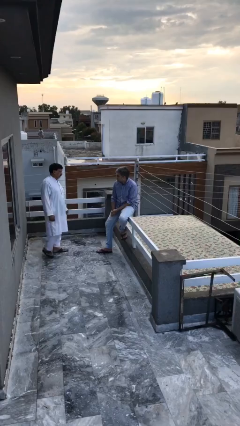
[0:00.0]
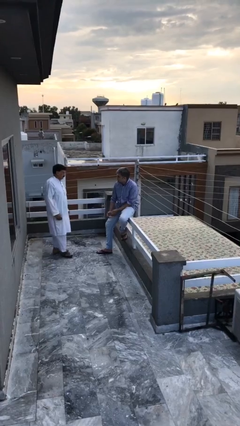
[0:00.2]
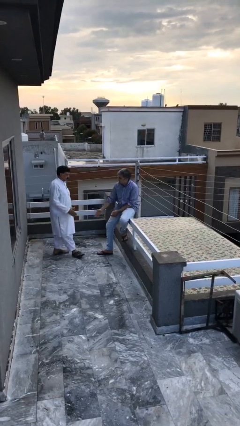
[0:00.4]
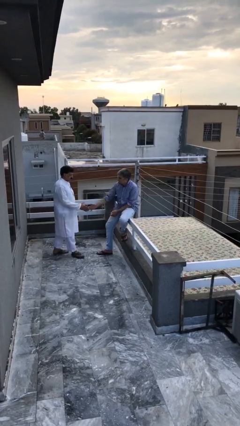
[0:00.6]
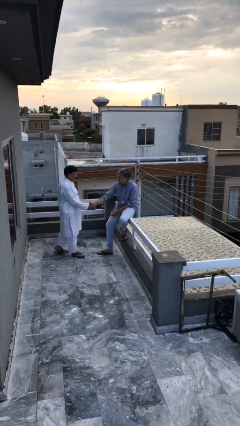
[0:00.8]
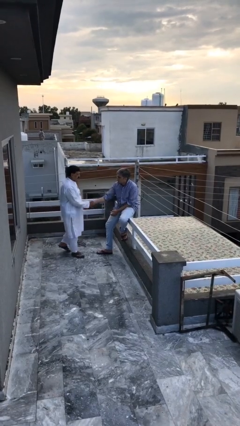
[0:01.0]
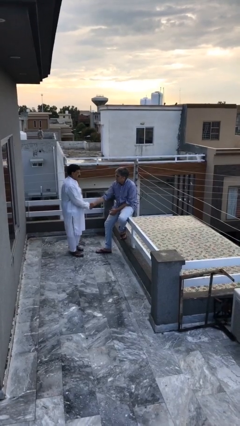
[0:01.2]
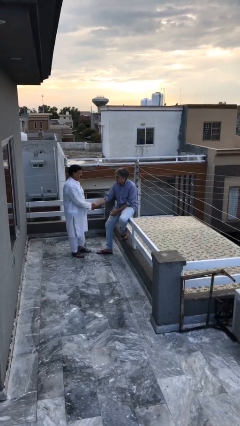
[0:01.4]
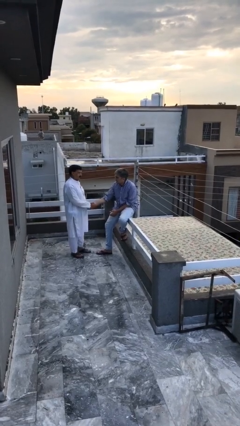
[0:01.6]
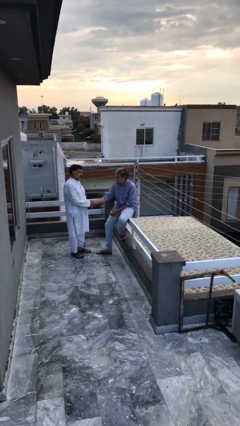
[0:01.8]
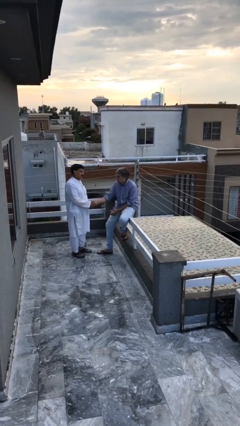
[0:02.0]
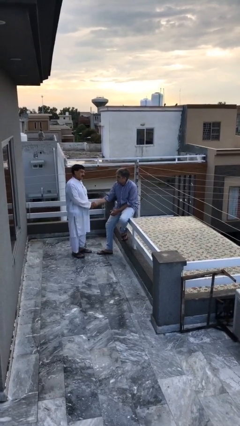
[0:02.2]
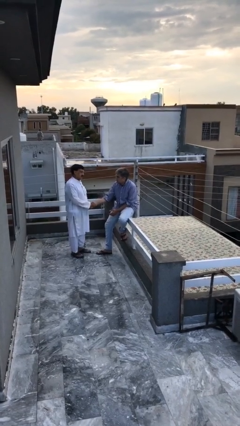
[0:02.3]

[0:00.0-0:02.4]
person shakes hand

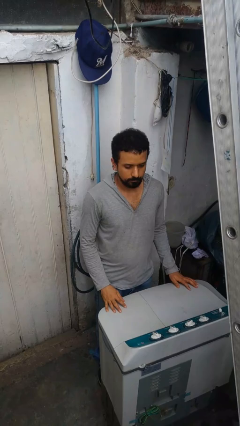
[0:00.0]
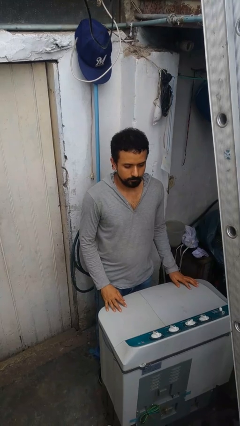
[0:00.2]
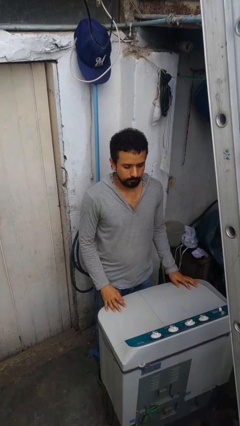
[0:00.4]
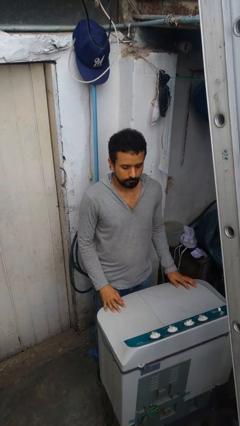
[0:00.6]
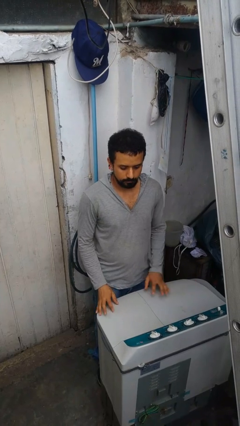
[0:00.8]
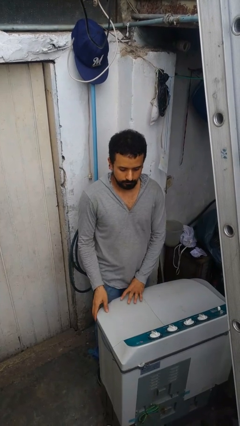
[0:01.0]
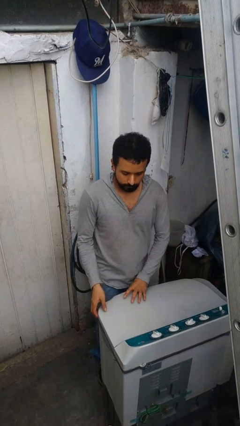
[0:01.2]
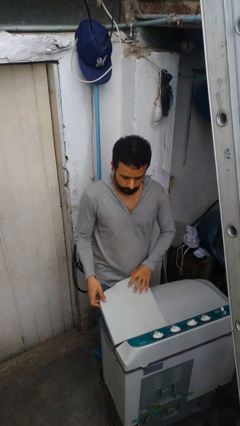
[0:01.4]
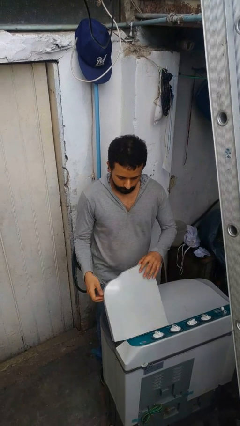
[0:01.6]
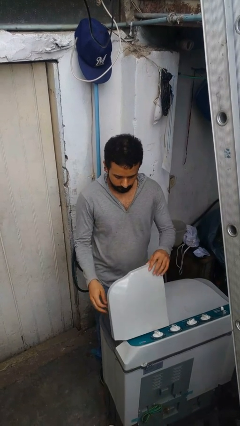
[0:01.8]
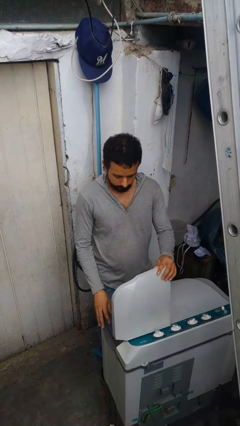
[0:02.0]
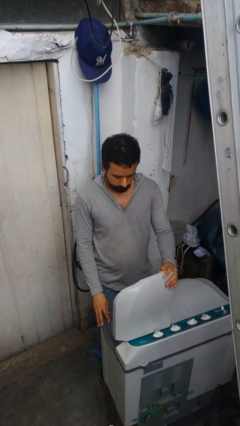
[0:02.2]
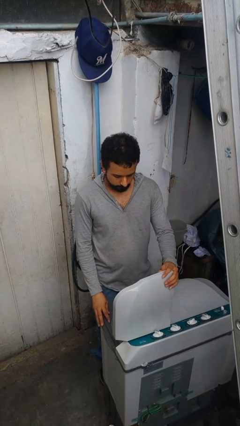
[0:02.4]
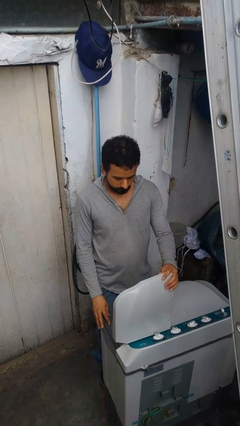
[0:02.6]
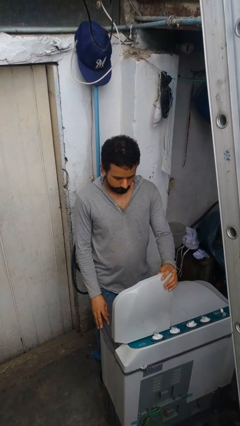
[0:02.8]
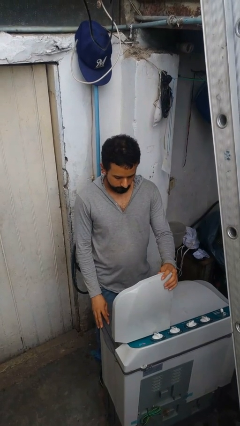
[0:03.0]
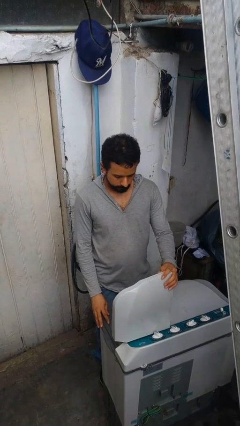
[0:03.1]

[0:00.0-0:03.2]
person opens clothes washer

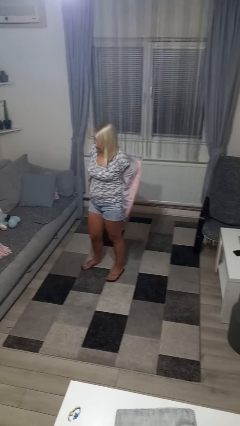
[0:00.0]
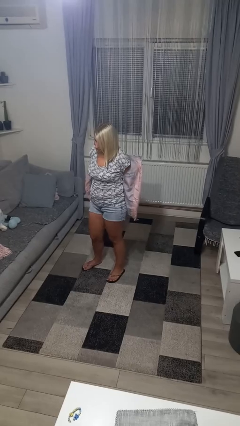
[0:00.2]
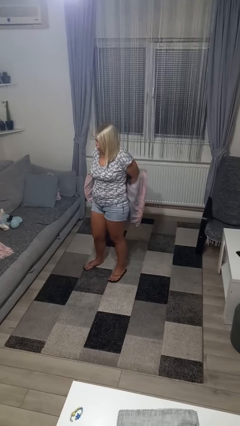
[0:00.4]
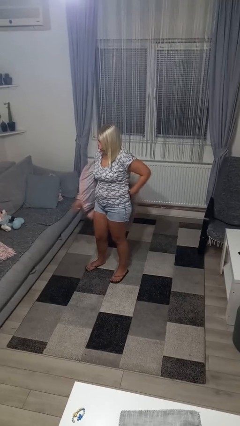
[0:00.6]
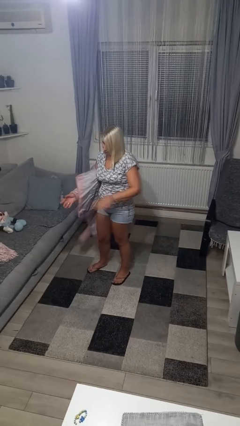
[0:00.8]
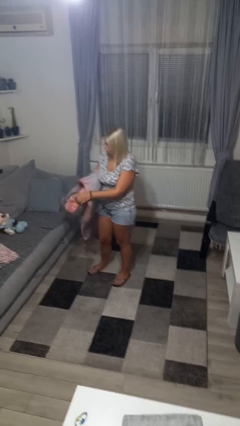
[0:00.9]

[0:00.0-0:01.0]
person takes off jacket

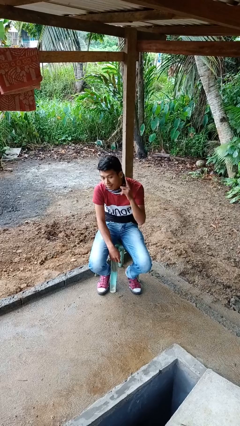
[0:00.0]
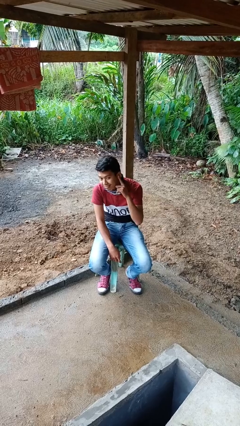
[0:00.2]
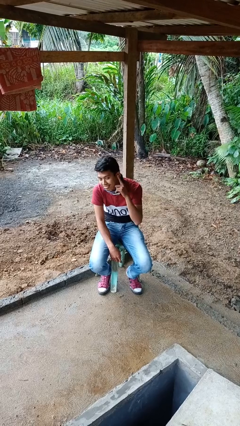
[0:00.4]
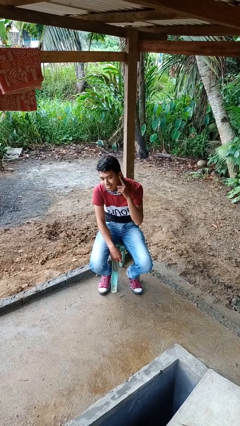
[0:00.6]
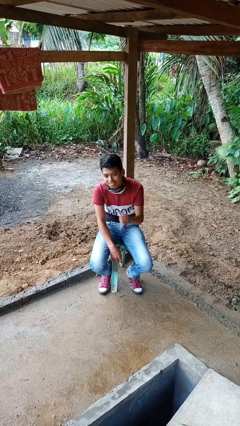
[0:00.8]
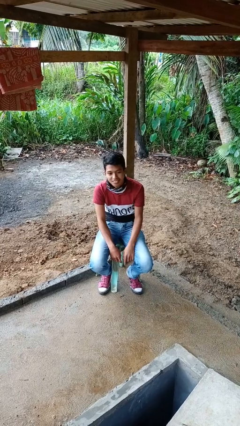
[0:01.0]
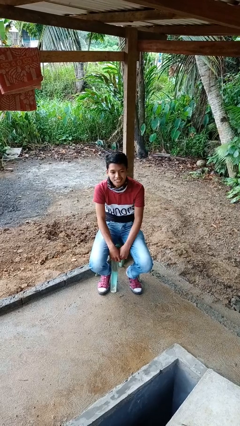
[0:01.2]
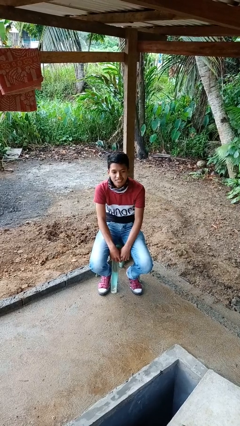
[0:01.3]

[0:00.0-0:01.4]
person gestures listen closely

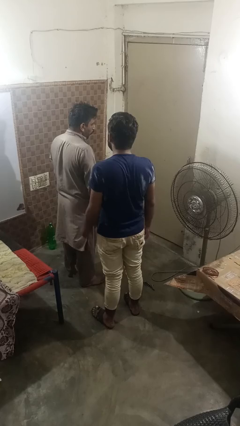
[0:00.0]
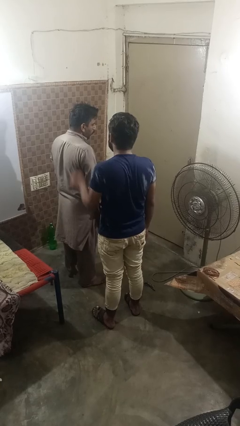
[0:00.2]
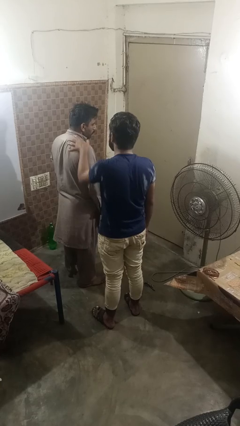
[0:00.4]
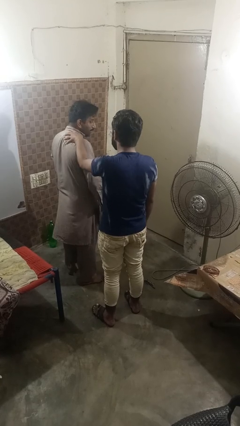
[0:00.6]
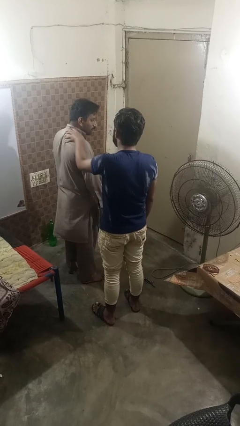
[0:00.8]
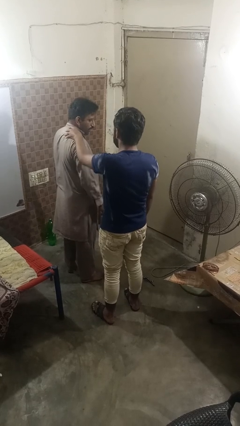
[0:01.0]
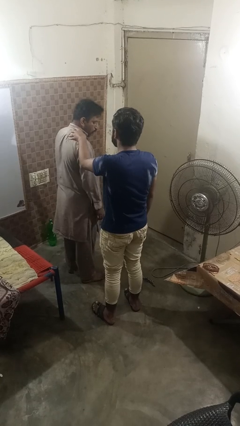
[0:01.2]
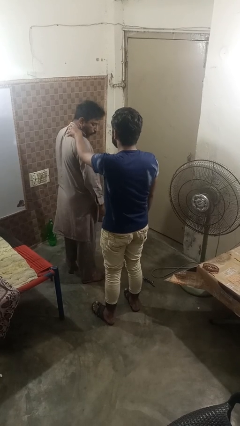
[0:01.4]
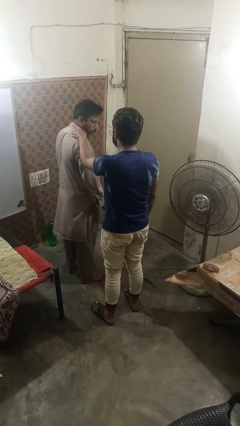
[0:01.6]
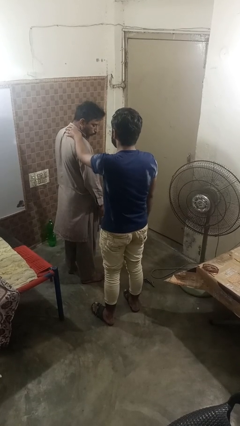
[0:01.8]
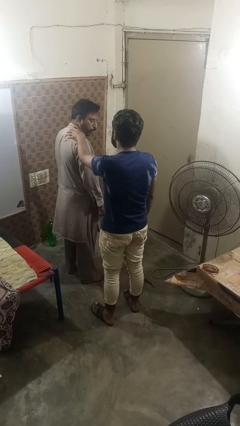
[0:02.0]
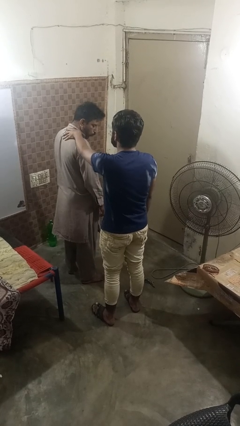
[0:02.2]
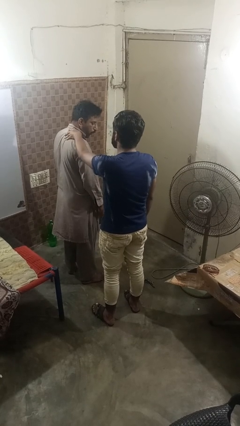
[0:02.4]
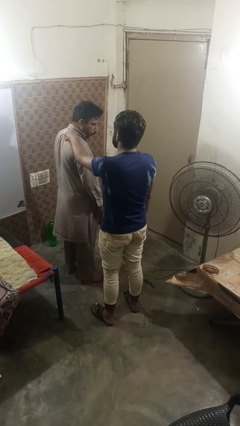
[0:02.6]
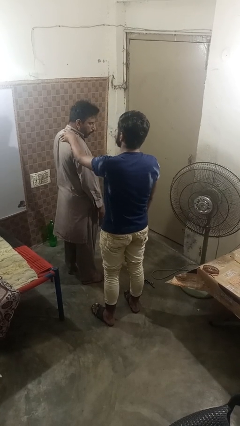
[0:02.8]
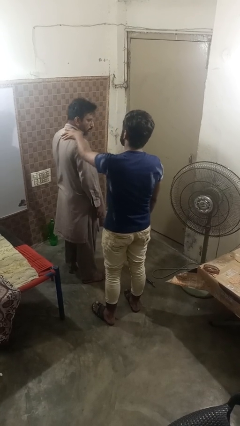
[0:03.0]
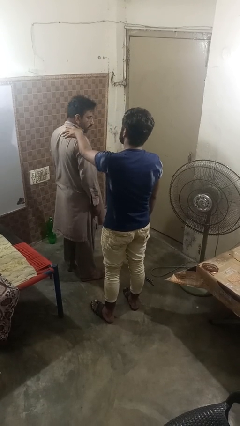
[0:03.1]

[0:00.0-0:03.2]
person grabs person by shoulder

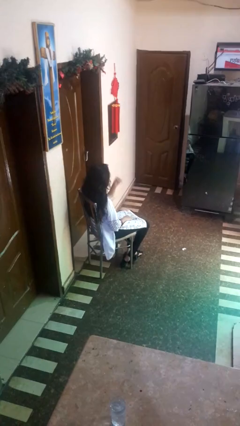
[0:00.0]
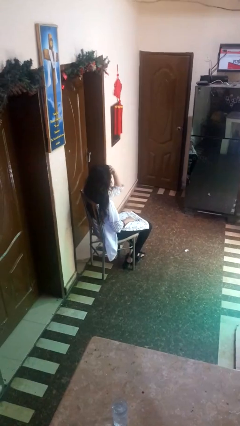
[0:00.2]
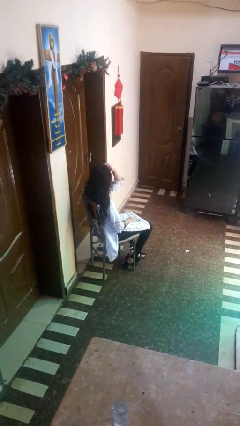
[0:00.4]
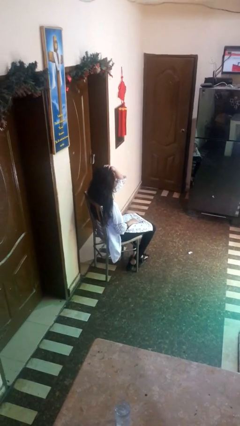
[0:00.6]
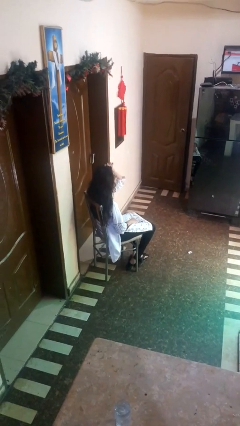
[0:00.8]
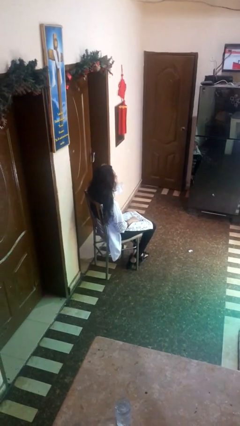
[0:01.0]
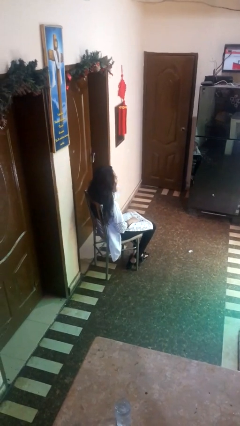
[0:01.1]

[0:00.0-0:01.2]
person strokes hair

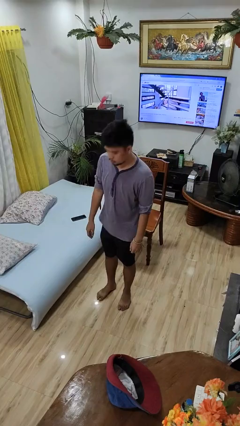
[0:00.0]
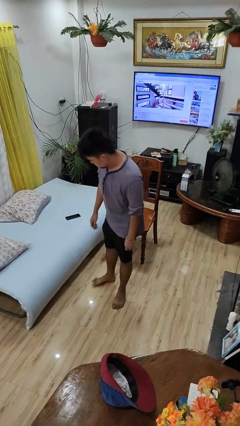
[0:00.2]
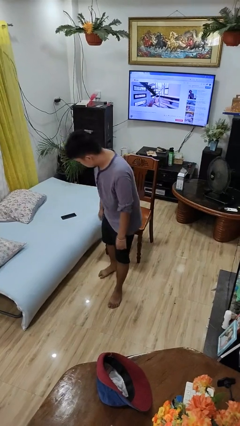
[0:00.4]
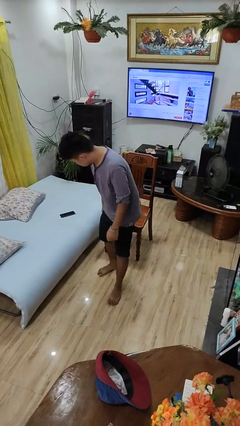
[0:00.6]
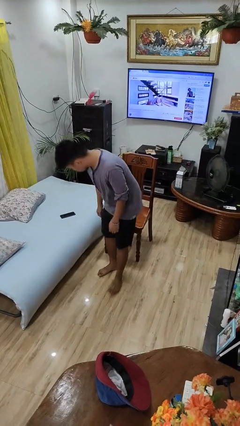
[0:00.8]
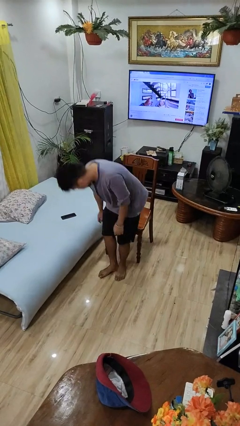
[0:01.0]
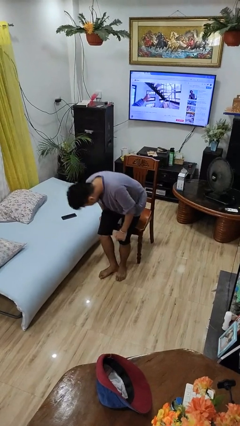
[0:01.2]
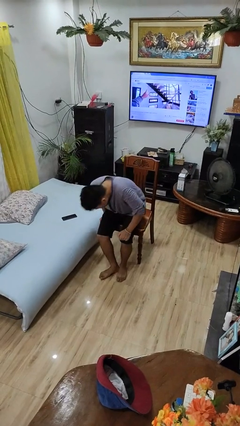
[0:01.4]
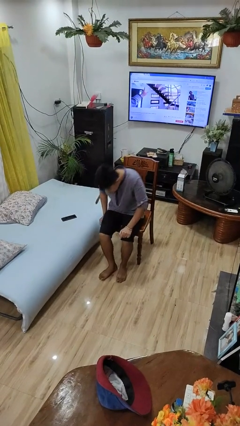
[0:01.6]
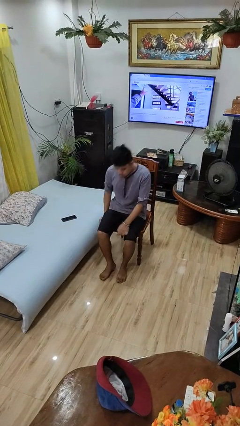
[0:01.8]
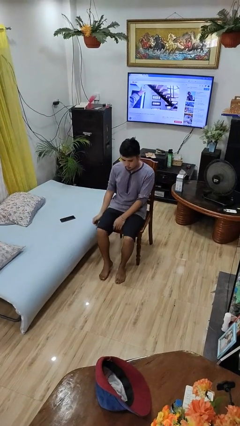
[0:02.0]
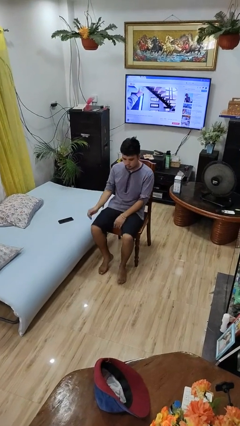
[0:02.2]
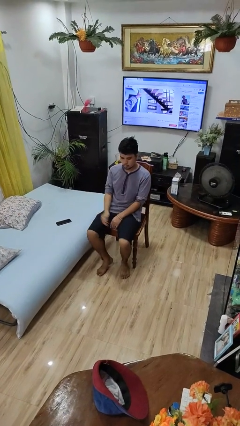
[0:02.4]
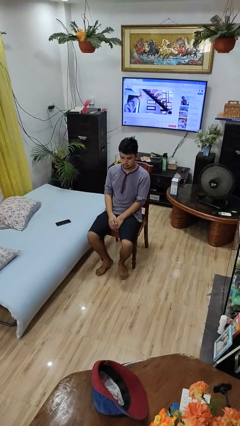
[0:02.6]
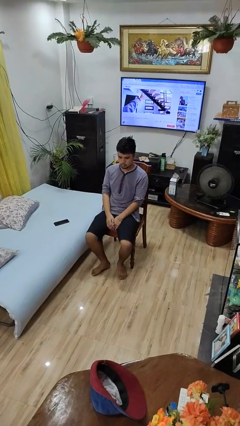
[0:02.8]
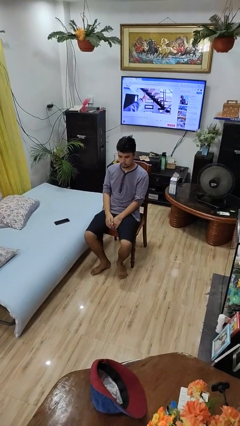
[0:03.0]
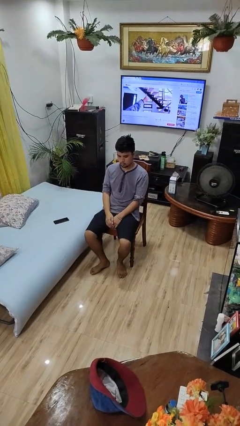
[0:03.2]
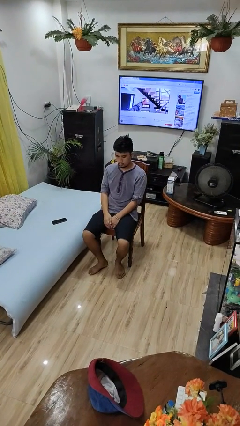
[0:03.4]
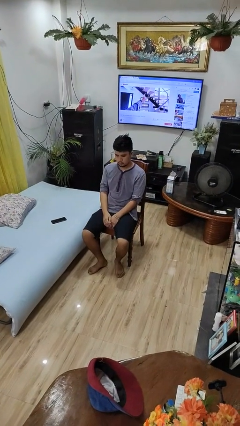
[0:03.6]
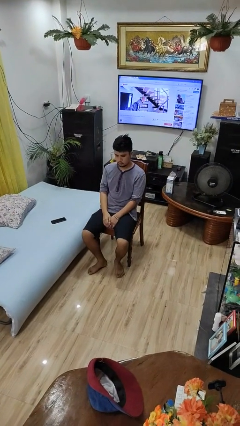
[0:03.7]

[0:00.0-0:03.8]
person sits down

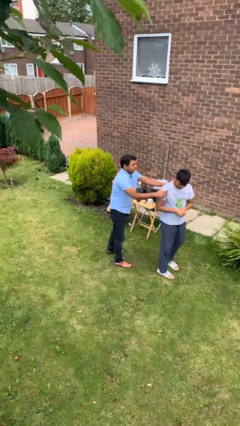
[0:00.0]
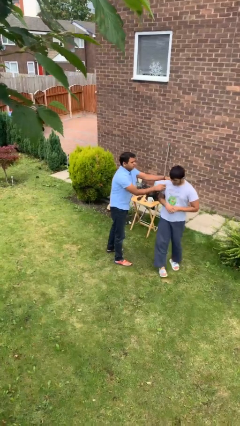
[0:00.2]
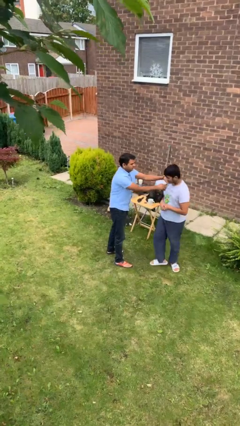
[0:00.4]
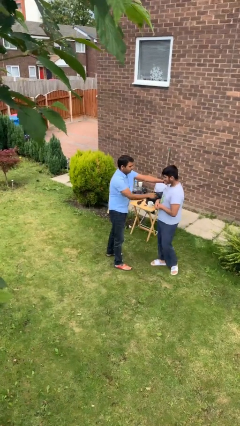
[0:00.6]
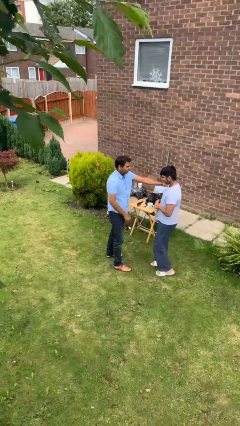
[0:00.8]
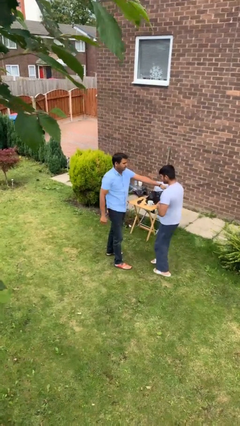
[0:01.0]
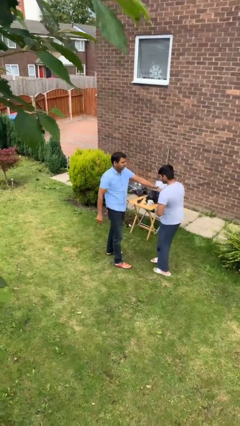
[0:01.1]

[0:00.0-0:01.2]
person spins person around
